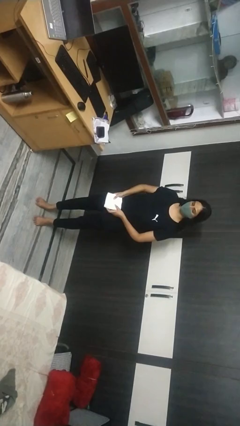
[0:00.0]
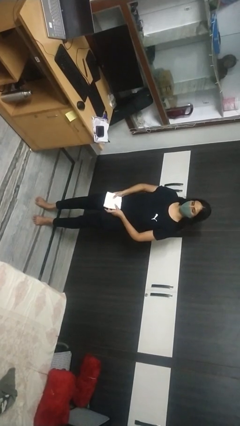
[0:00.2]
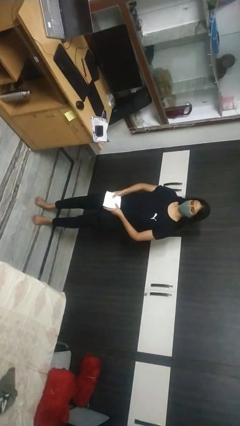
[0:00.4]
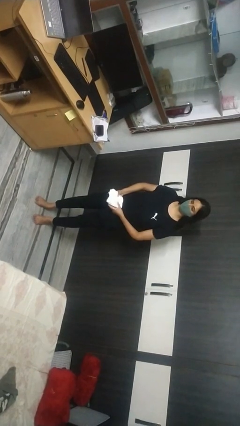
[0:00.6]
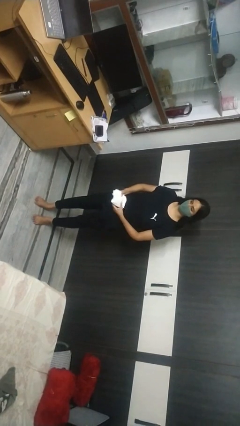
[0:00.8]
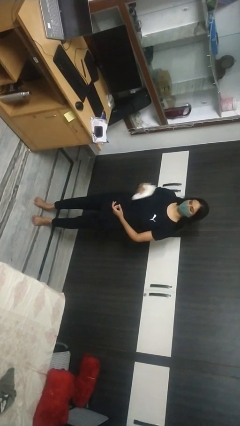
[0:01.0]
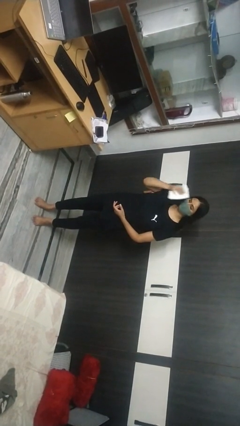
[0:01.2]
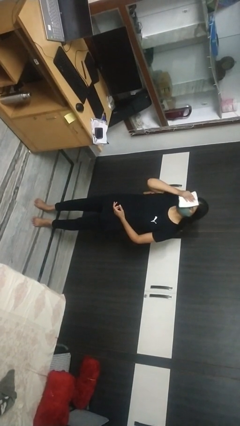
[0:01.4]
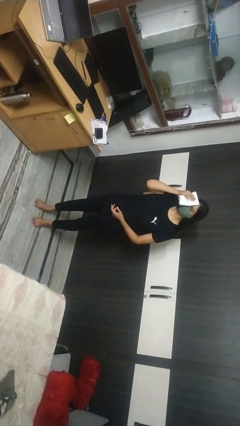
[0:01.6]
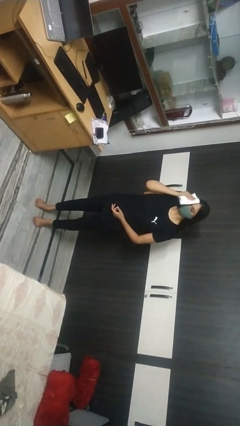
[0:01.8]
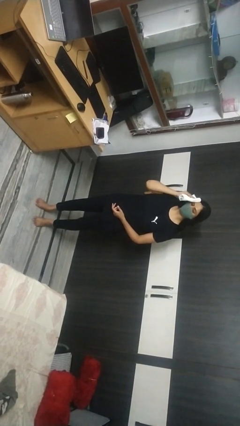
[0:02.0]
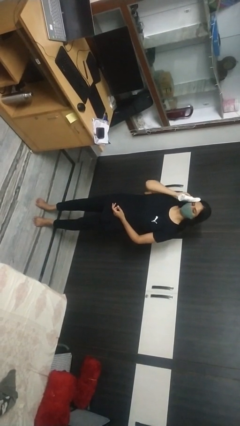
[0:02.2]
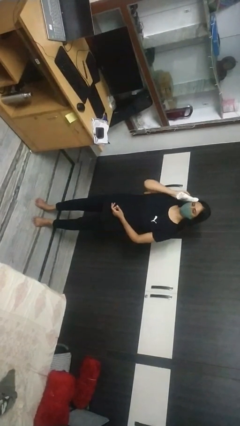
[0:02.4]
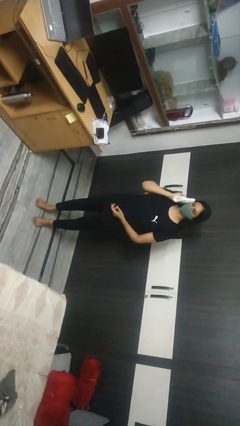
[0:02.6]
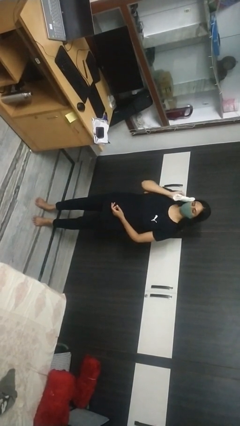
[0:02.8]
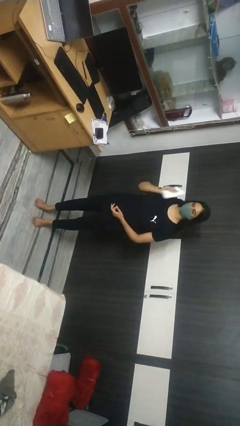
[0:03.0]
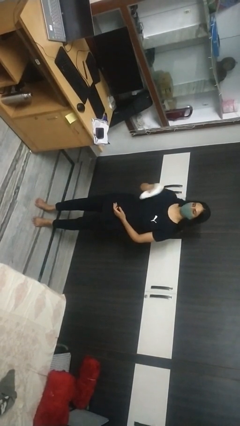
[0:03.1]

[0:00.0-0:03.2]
person wipes mouth with napkin

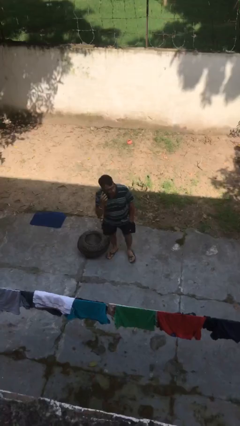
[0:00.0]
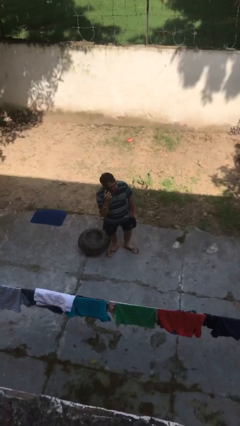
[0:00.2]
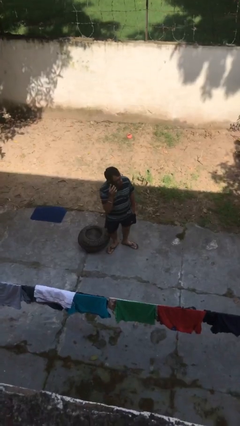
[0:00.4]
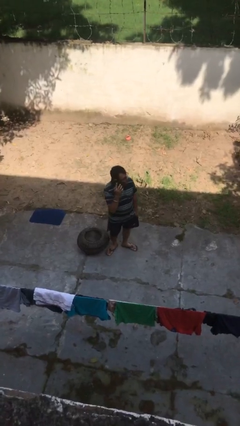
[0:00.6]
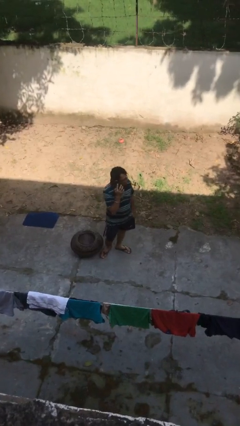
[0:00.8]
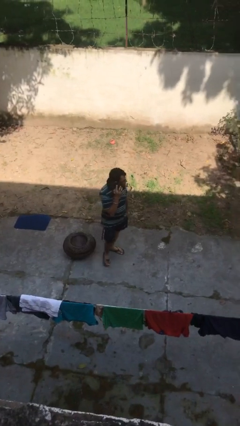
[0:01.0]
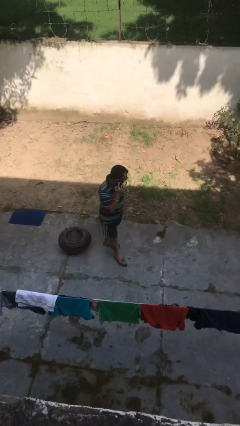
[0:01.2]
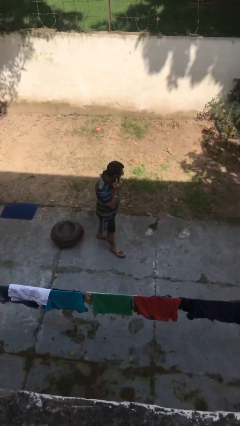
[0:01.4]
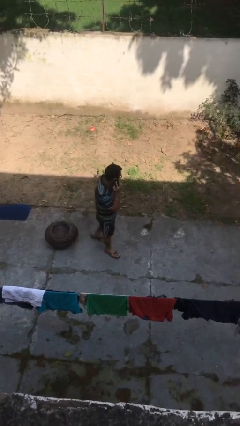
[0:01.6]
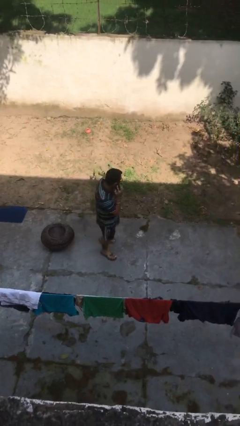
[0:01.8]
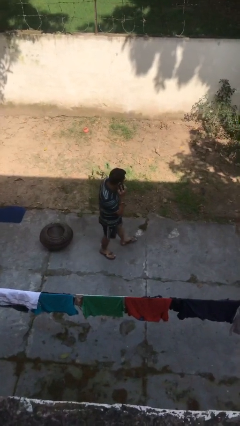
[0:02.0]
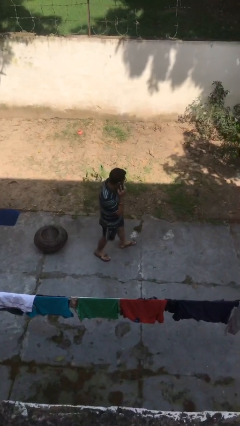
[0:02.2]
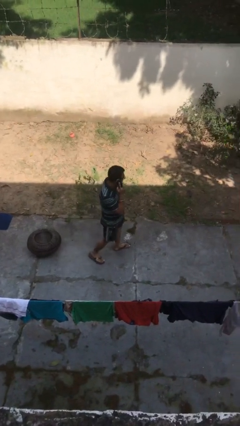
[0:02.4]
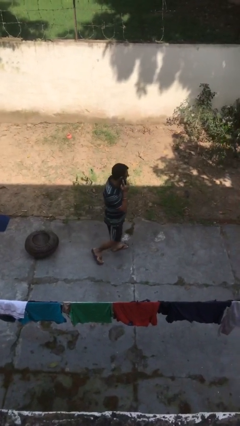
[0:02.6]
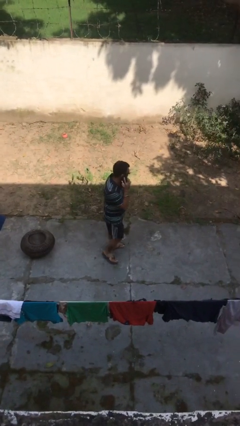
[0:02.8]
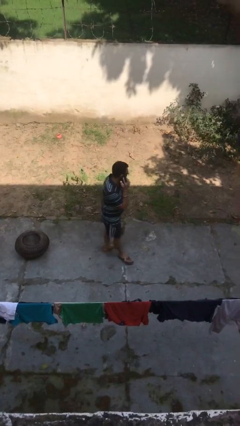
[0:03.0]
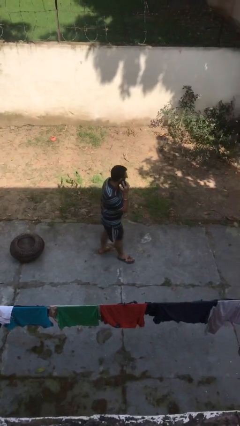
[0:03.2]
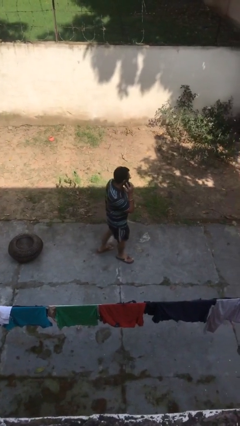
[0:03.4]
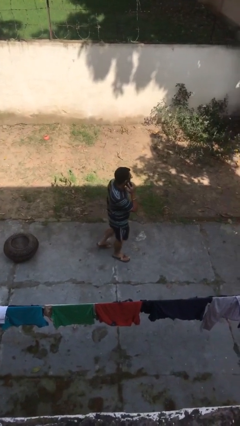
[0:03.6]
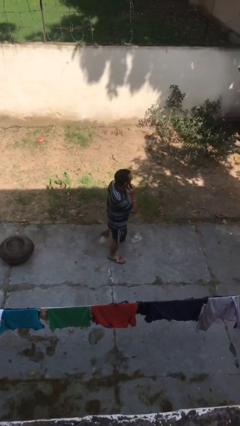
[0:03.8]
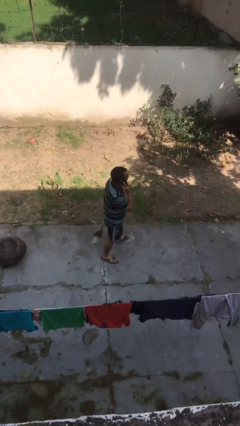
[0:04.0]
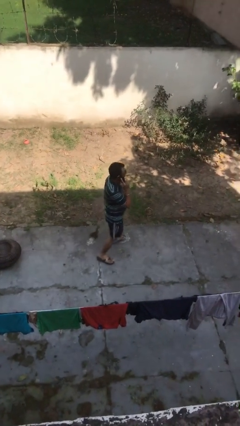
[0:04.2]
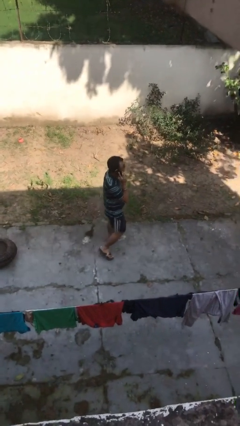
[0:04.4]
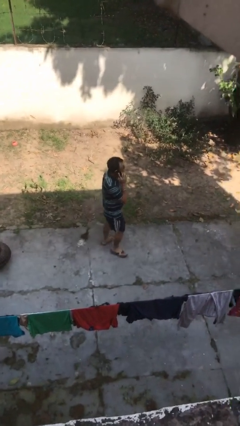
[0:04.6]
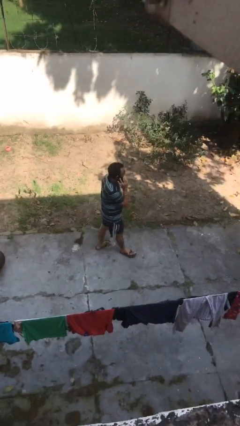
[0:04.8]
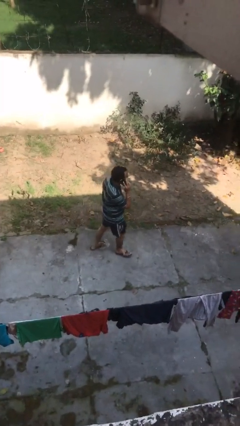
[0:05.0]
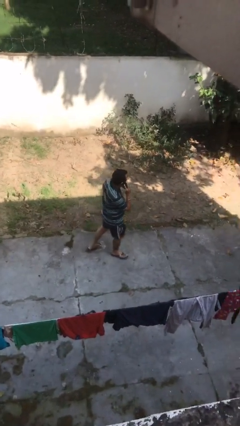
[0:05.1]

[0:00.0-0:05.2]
person talks on phone

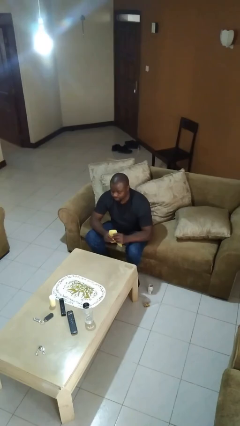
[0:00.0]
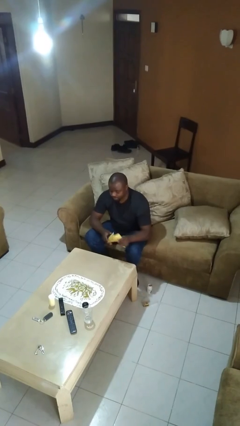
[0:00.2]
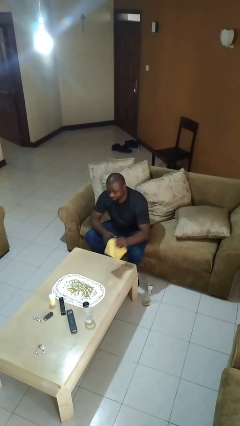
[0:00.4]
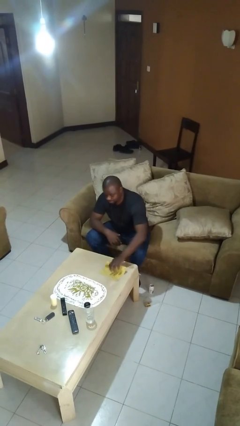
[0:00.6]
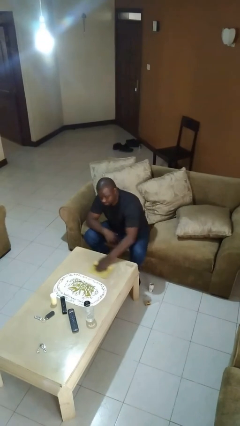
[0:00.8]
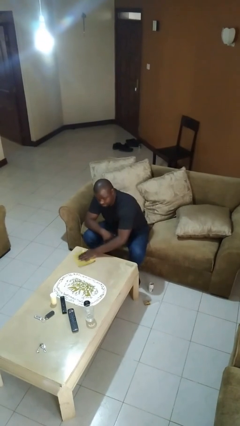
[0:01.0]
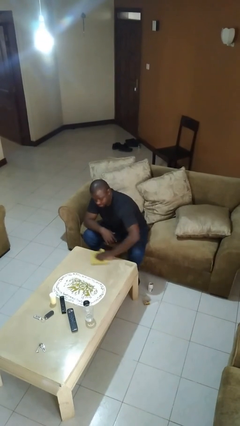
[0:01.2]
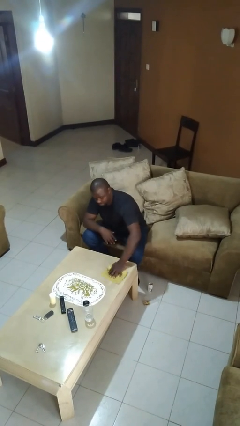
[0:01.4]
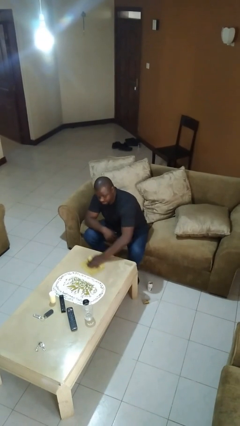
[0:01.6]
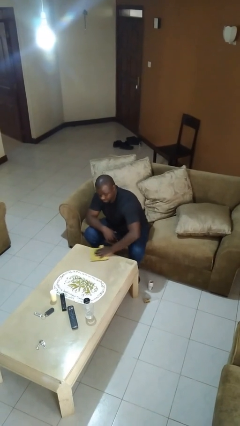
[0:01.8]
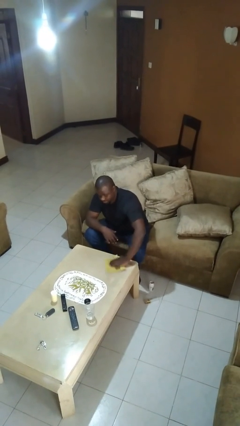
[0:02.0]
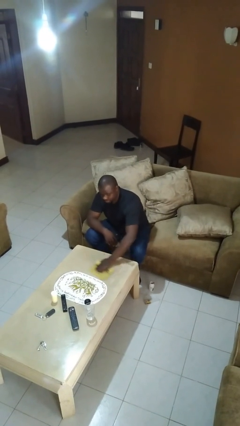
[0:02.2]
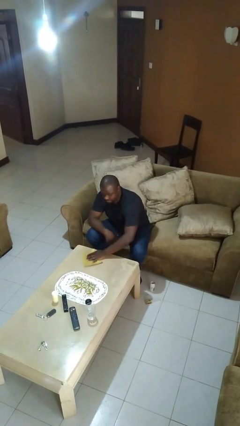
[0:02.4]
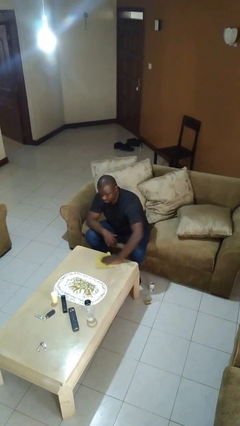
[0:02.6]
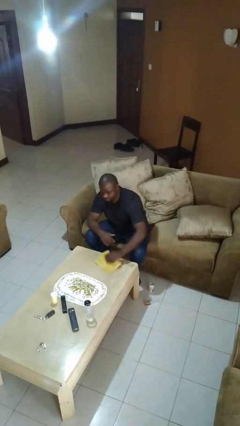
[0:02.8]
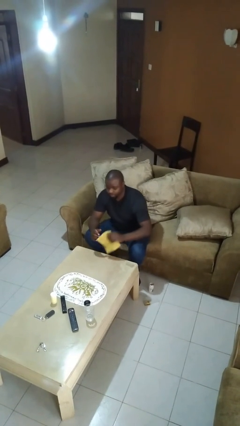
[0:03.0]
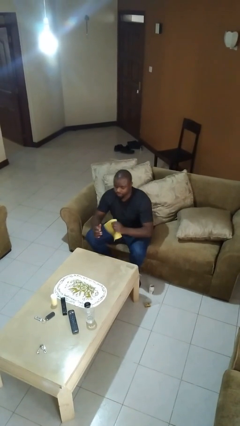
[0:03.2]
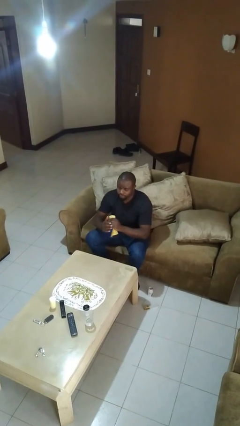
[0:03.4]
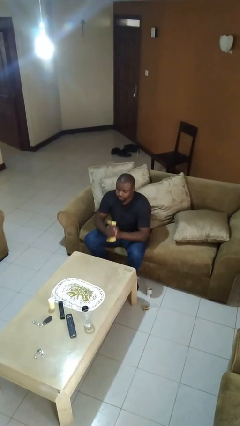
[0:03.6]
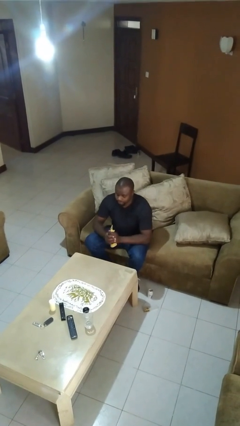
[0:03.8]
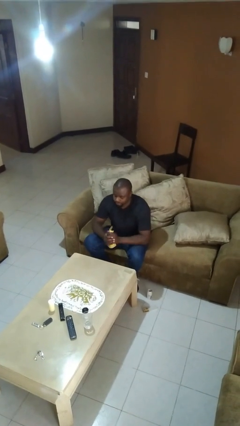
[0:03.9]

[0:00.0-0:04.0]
person cleans table with rag

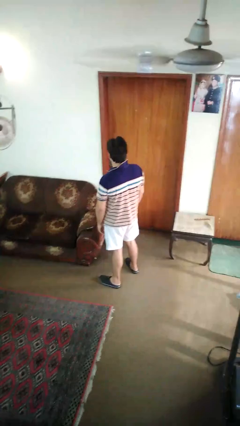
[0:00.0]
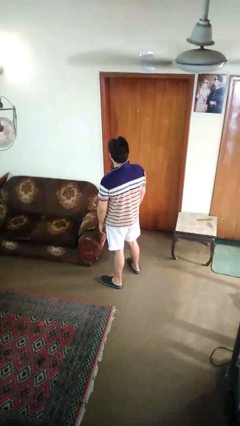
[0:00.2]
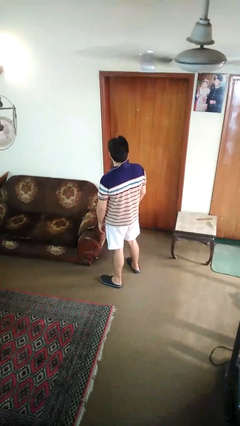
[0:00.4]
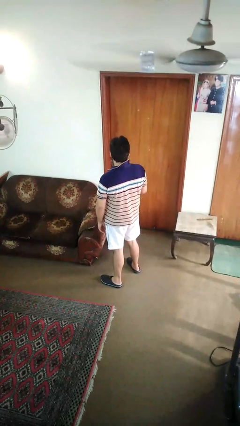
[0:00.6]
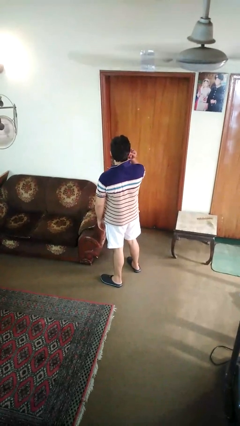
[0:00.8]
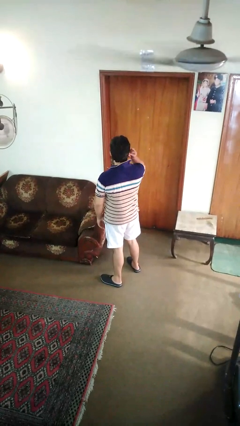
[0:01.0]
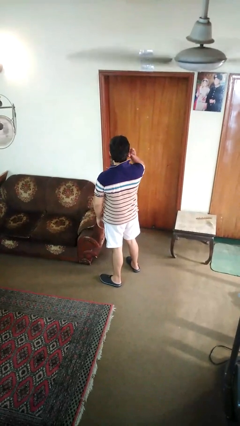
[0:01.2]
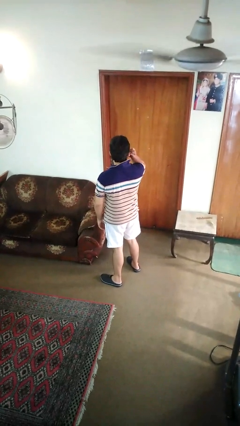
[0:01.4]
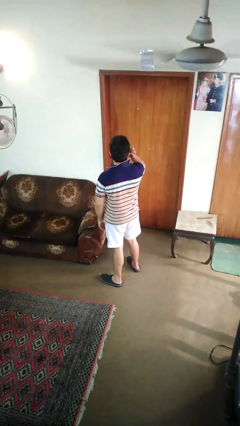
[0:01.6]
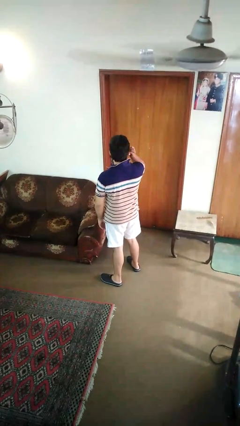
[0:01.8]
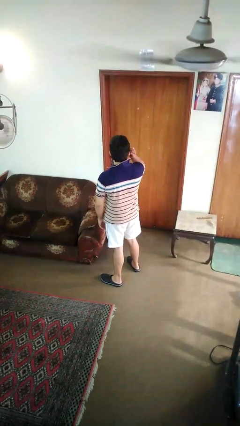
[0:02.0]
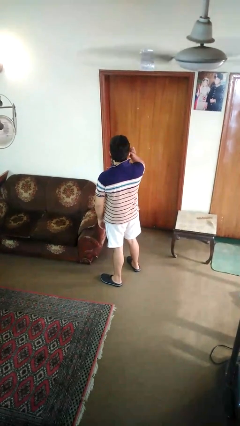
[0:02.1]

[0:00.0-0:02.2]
person touches earlobe

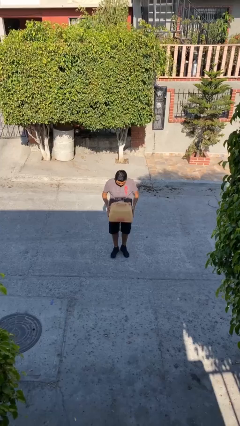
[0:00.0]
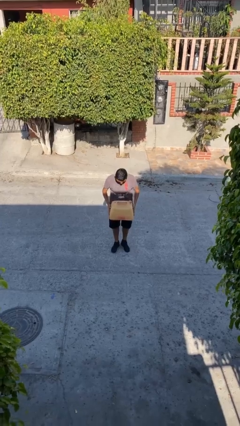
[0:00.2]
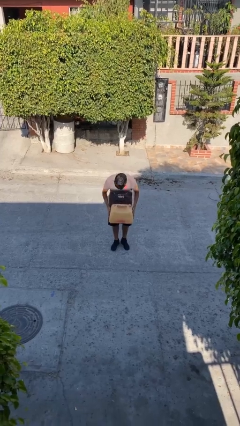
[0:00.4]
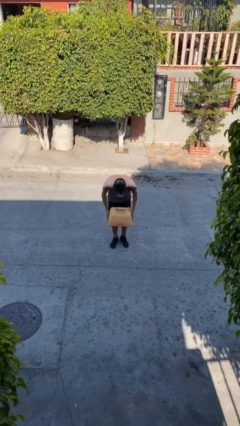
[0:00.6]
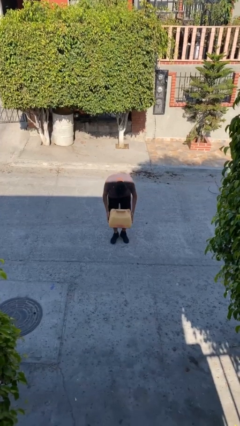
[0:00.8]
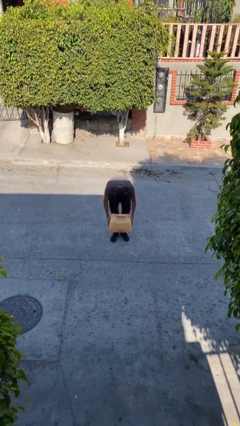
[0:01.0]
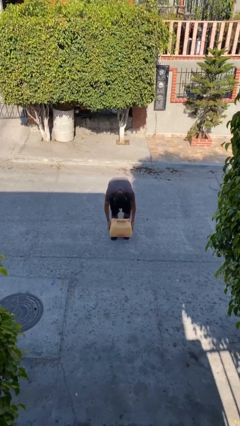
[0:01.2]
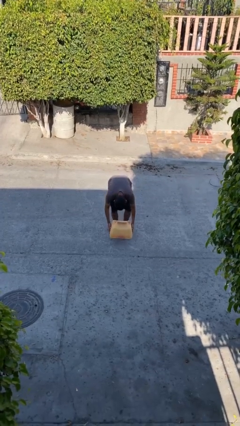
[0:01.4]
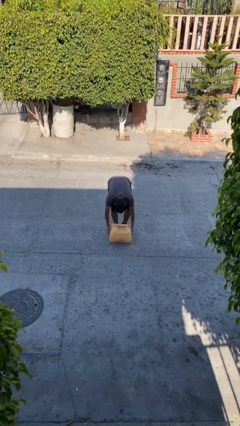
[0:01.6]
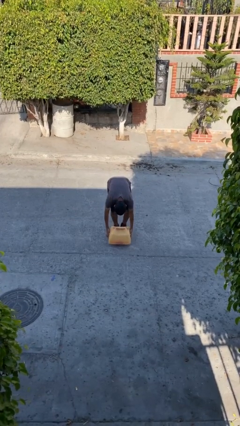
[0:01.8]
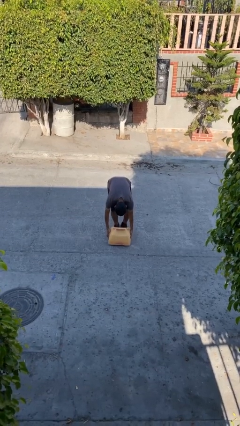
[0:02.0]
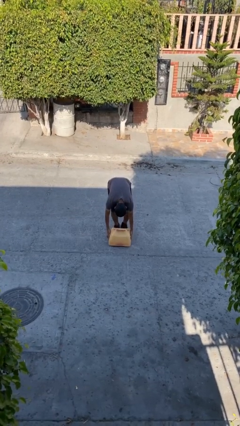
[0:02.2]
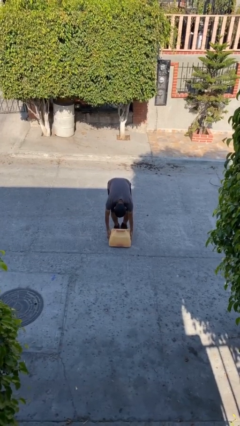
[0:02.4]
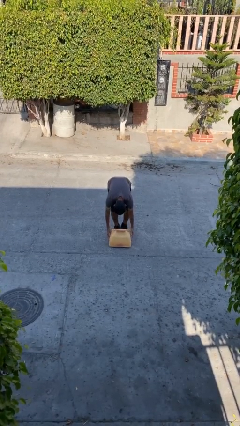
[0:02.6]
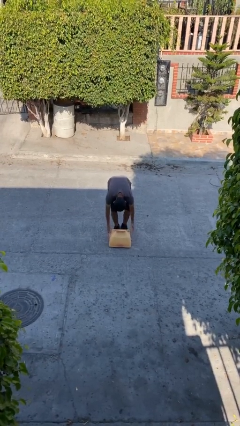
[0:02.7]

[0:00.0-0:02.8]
person puts down object on floor

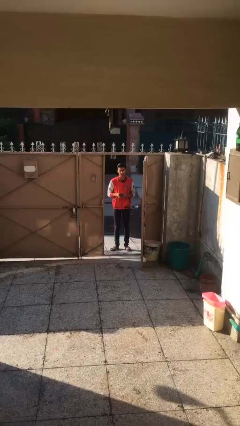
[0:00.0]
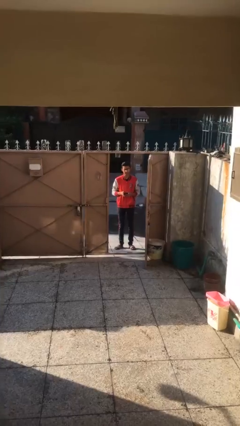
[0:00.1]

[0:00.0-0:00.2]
person enters scene through structure
